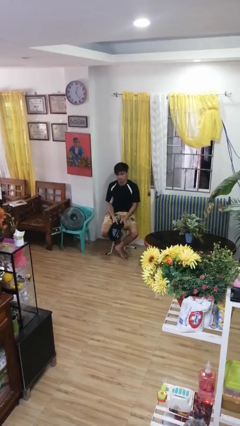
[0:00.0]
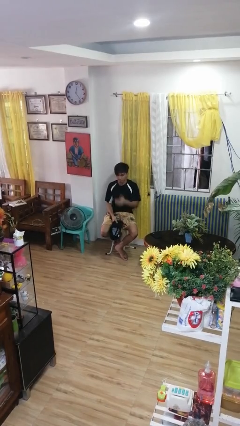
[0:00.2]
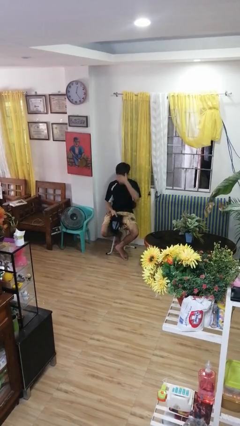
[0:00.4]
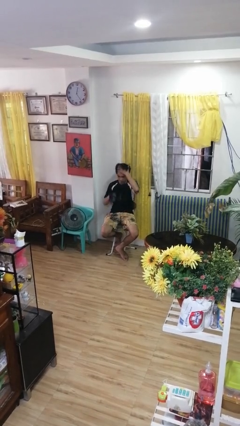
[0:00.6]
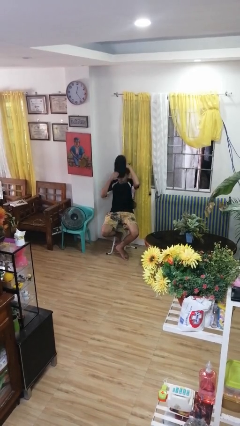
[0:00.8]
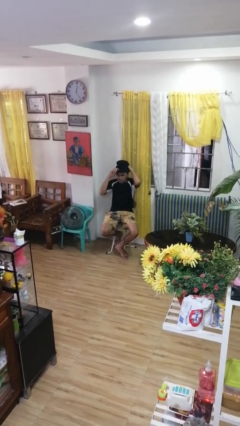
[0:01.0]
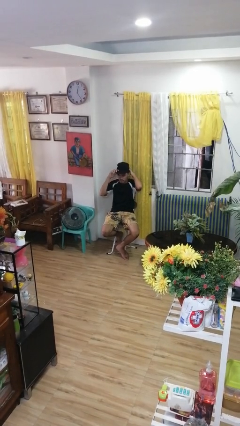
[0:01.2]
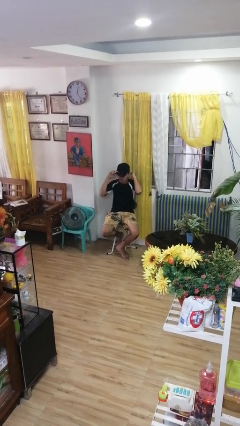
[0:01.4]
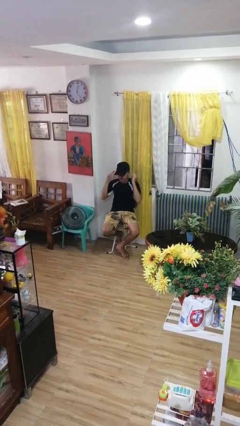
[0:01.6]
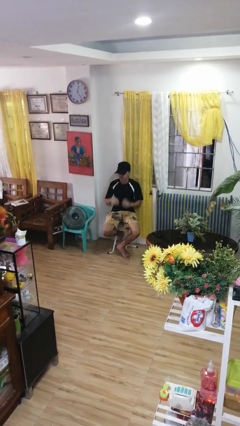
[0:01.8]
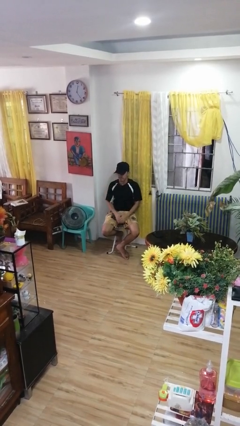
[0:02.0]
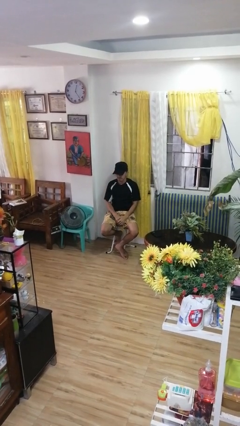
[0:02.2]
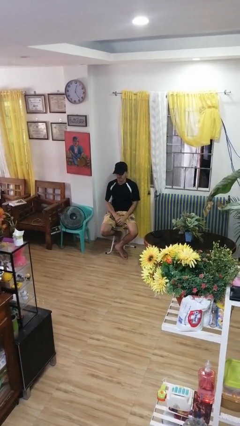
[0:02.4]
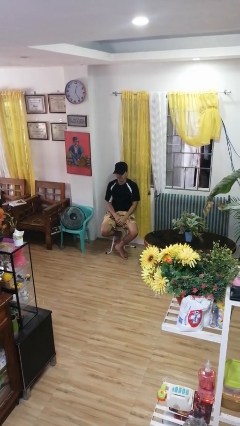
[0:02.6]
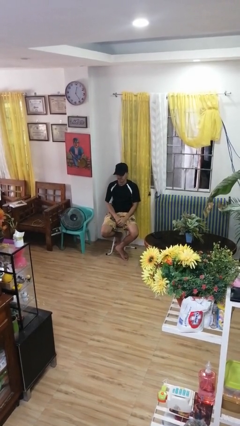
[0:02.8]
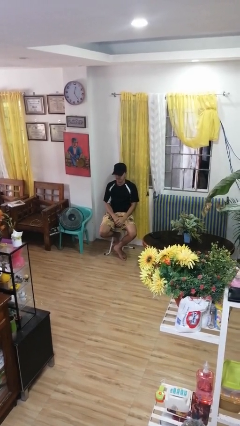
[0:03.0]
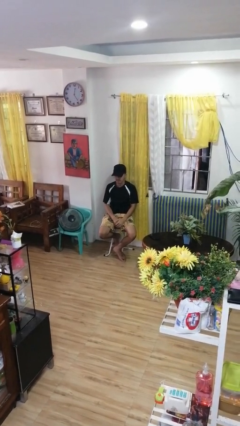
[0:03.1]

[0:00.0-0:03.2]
person puts on hat

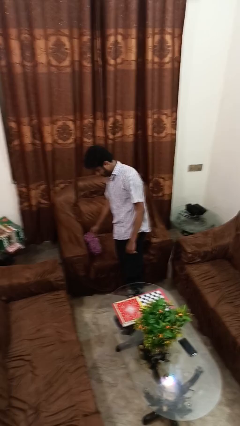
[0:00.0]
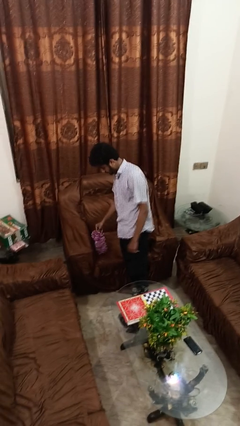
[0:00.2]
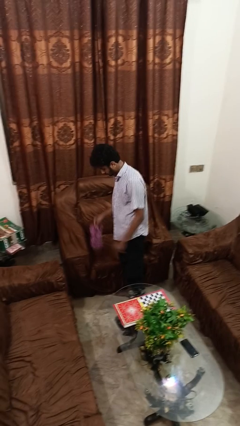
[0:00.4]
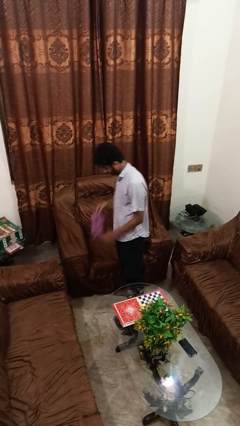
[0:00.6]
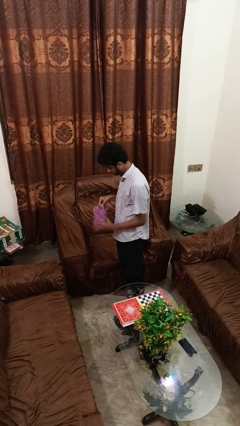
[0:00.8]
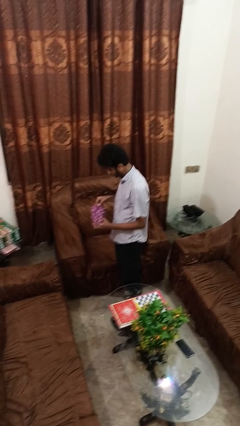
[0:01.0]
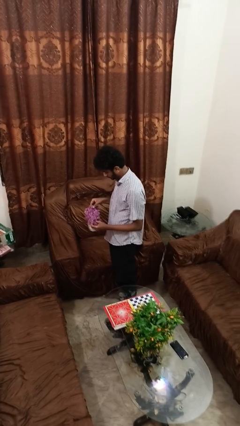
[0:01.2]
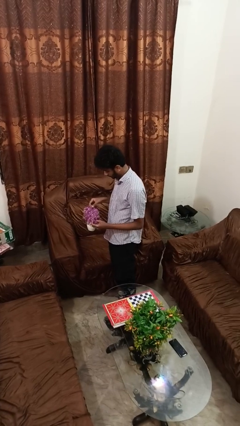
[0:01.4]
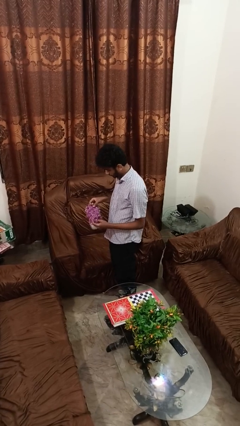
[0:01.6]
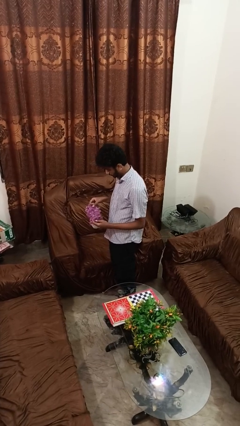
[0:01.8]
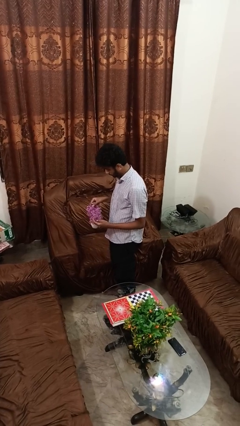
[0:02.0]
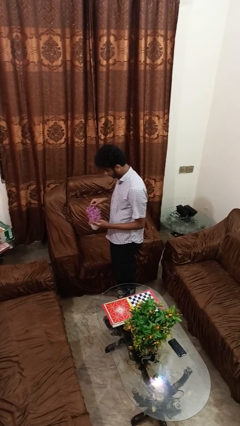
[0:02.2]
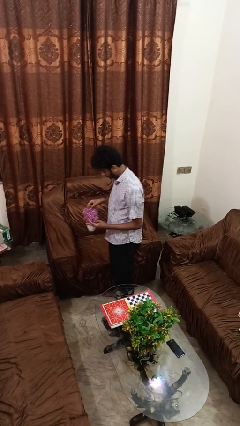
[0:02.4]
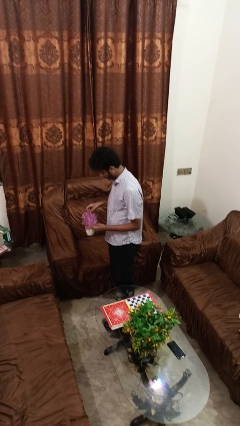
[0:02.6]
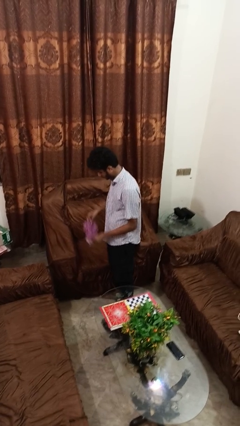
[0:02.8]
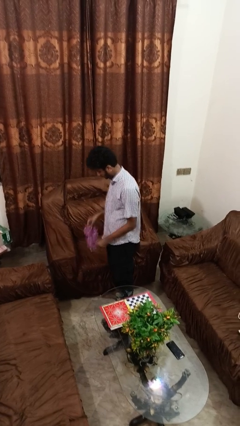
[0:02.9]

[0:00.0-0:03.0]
person picks up object from couch

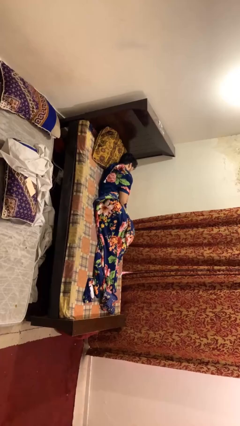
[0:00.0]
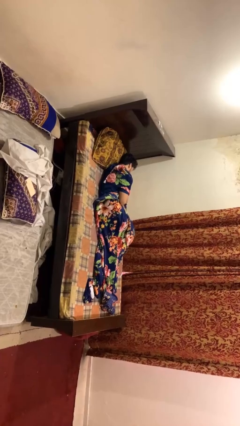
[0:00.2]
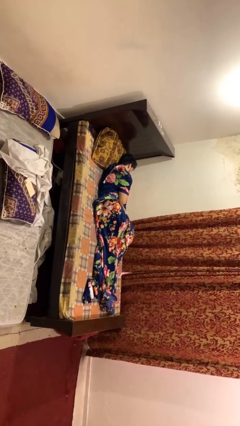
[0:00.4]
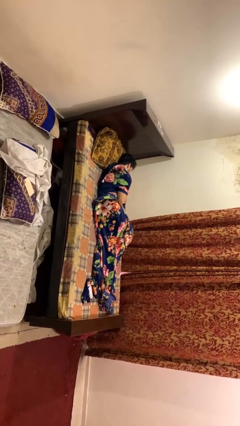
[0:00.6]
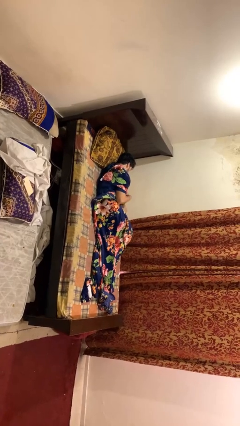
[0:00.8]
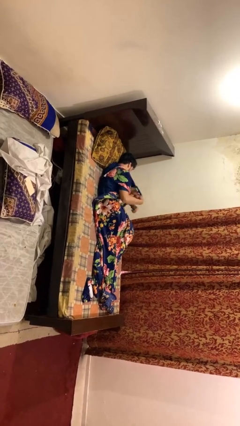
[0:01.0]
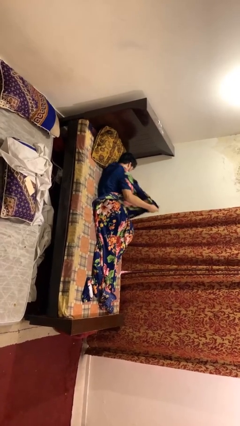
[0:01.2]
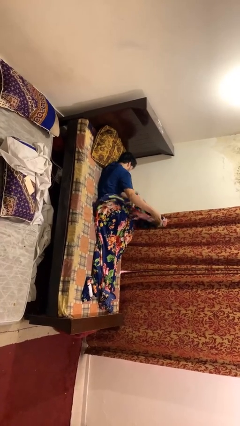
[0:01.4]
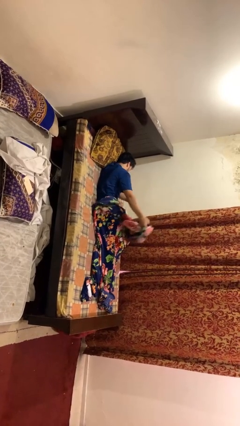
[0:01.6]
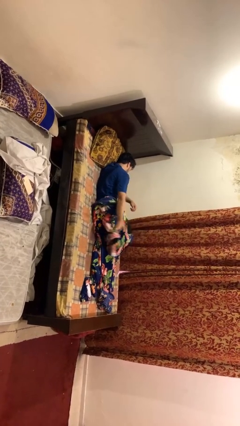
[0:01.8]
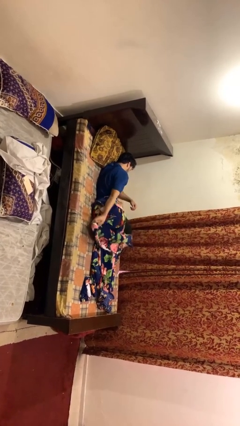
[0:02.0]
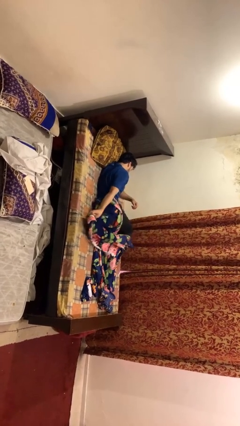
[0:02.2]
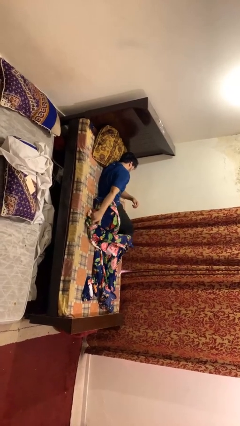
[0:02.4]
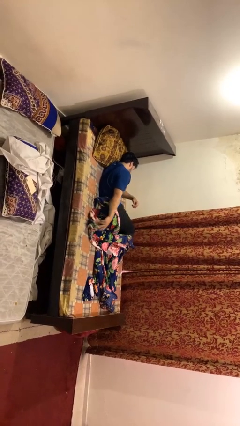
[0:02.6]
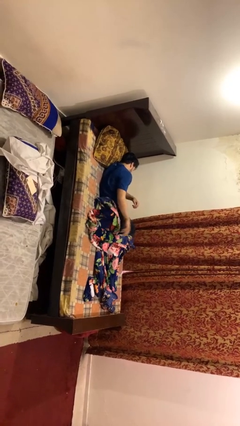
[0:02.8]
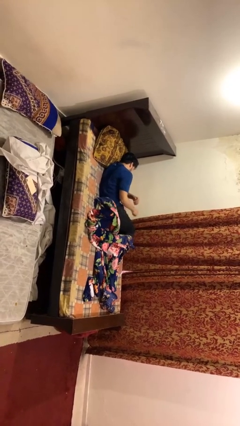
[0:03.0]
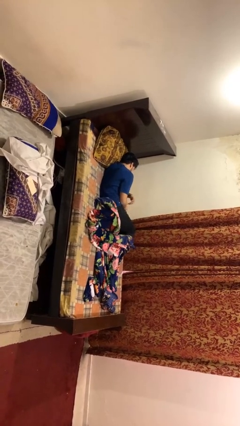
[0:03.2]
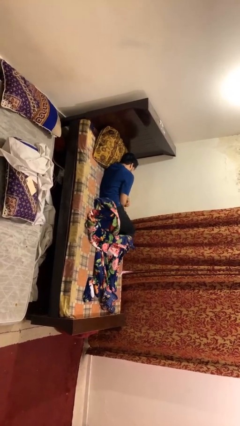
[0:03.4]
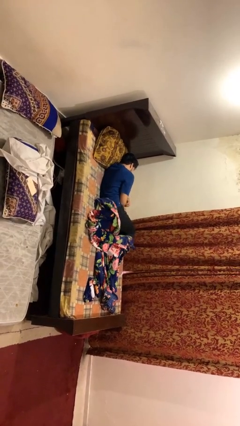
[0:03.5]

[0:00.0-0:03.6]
person uncovers with blanket

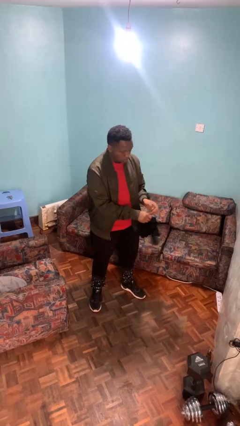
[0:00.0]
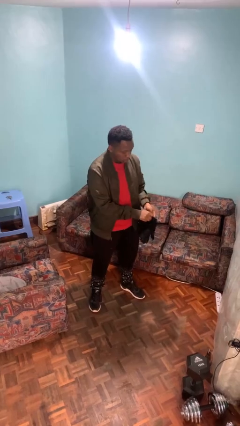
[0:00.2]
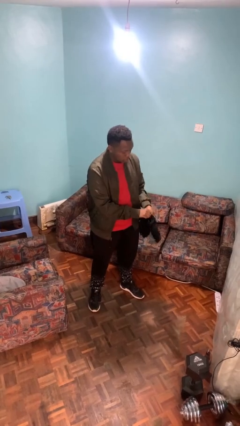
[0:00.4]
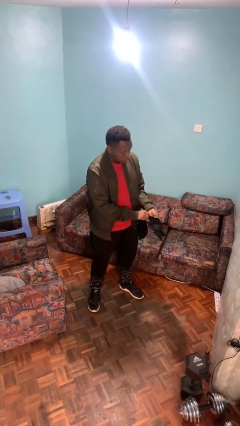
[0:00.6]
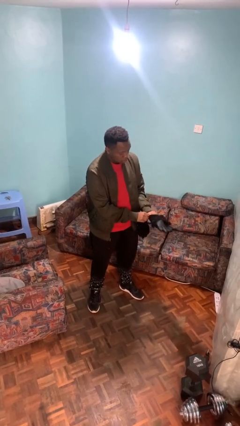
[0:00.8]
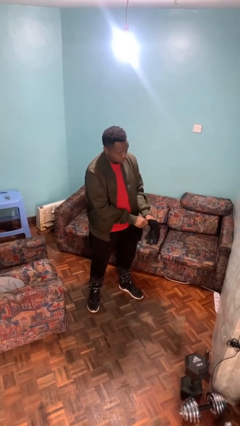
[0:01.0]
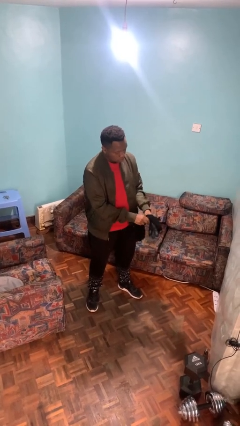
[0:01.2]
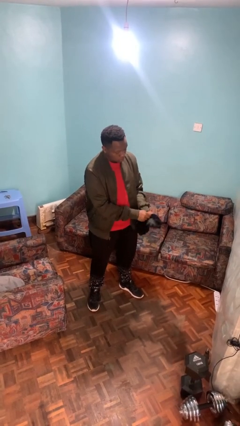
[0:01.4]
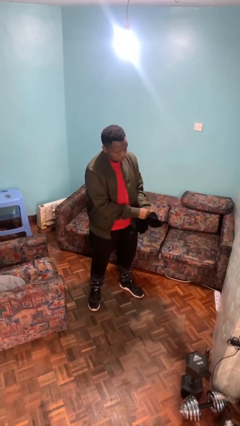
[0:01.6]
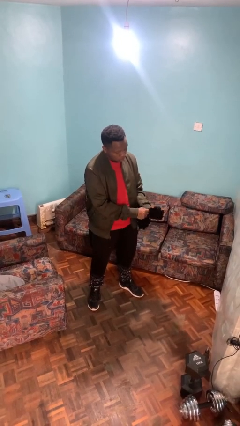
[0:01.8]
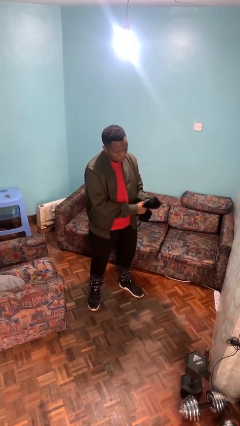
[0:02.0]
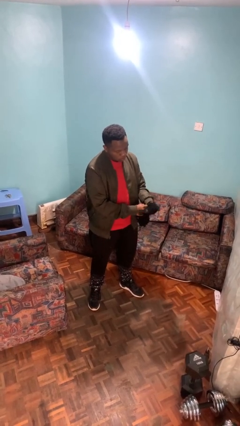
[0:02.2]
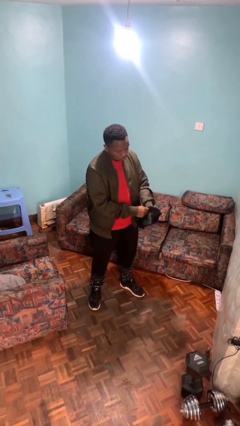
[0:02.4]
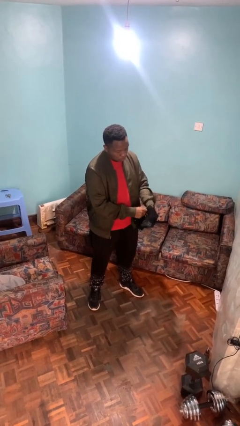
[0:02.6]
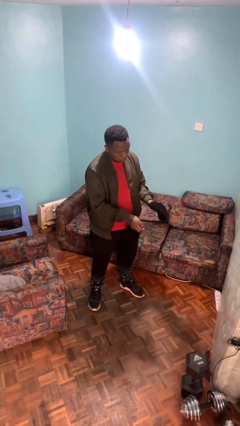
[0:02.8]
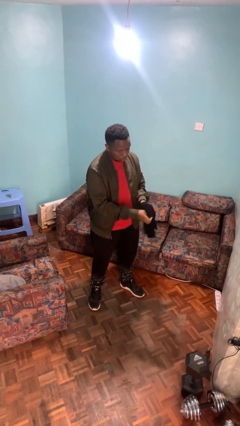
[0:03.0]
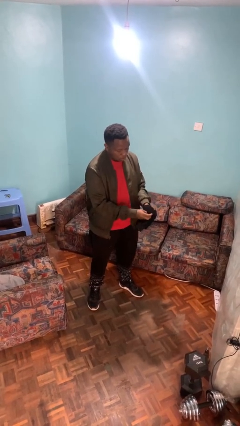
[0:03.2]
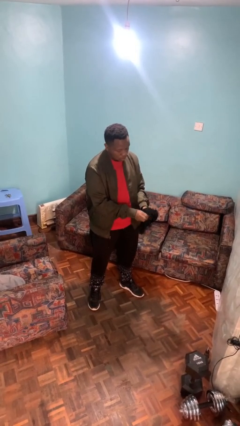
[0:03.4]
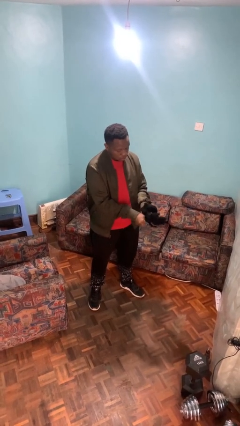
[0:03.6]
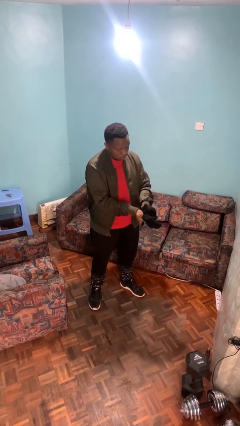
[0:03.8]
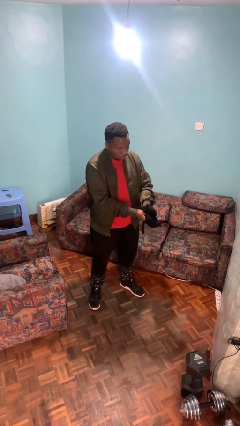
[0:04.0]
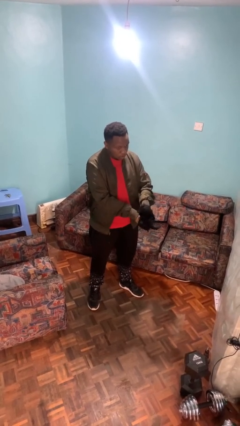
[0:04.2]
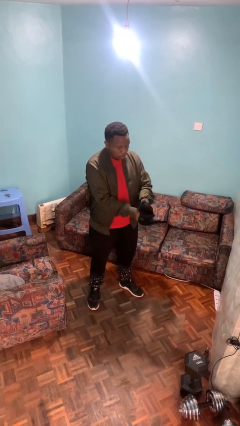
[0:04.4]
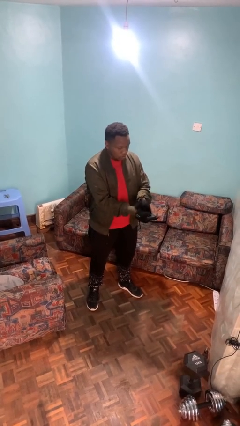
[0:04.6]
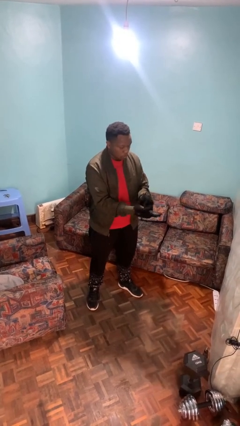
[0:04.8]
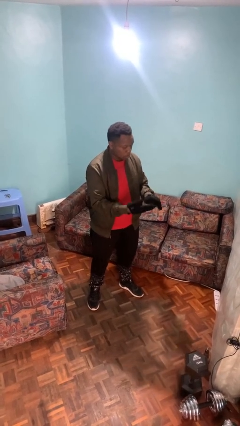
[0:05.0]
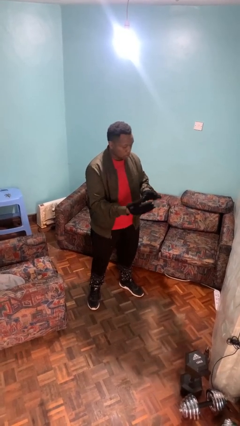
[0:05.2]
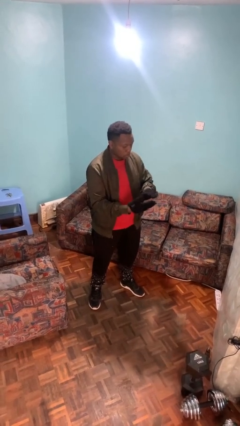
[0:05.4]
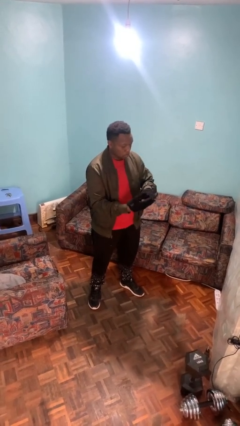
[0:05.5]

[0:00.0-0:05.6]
person puts on gloves

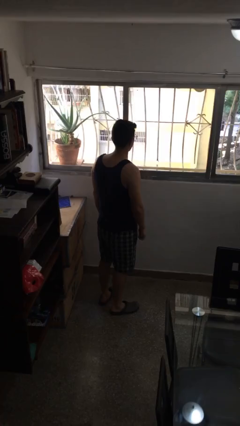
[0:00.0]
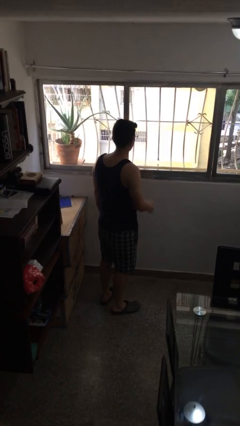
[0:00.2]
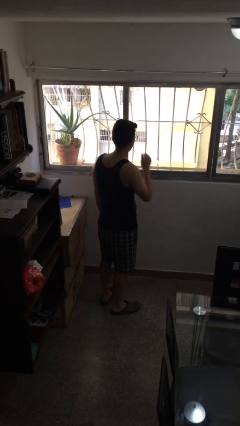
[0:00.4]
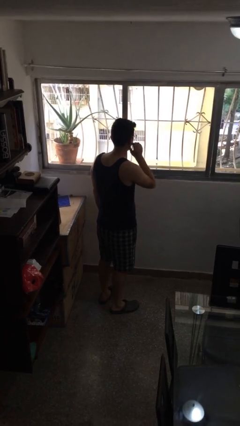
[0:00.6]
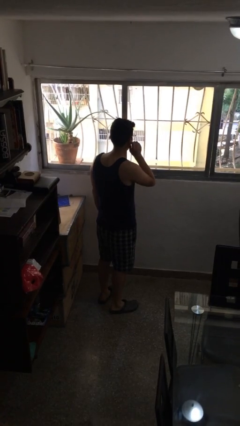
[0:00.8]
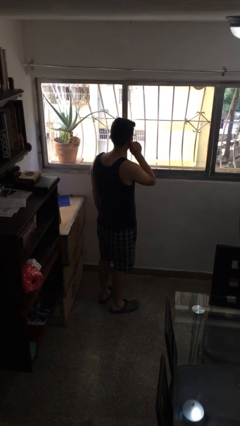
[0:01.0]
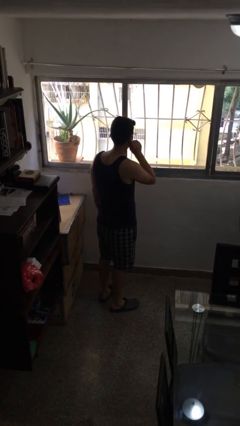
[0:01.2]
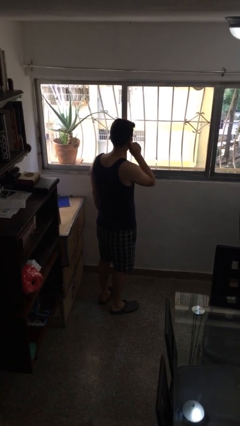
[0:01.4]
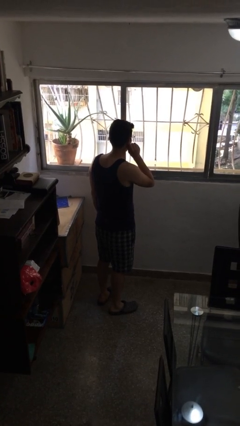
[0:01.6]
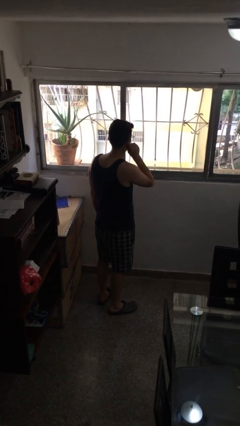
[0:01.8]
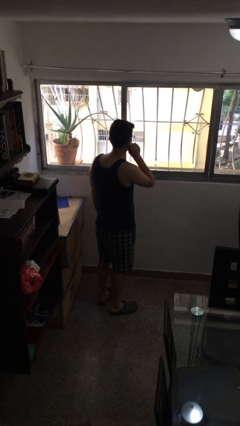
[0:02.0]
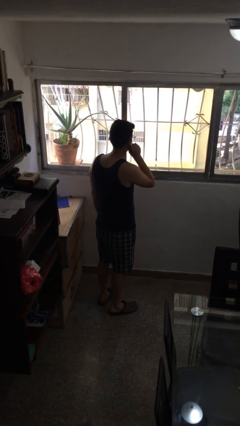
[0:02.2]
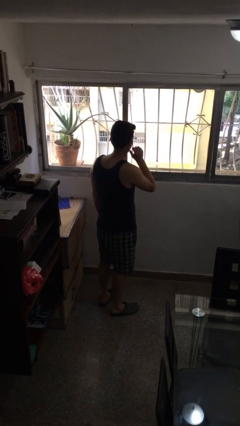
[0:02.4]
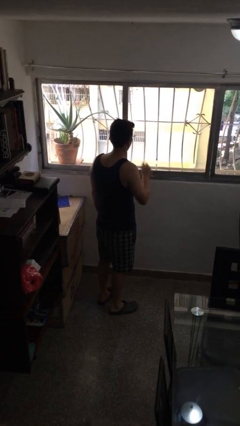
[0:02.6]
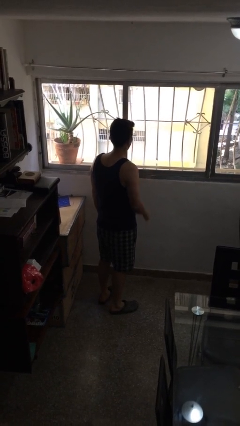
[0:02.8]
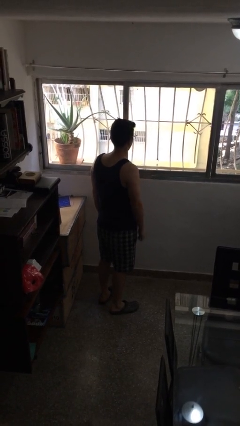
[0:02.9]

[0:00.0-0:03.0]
person touches earlobe
